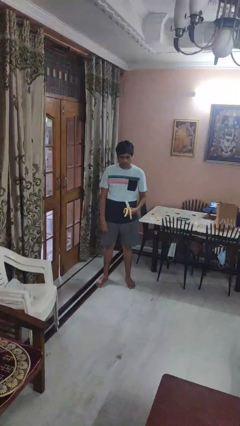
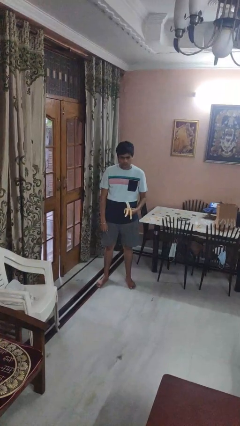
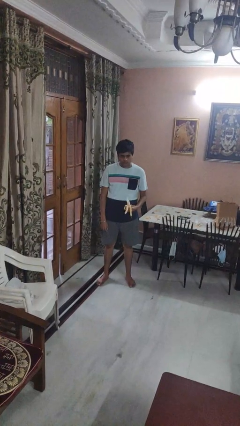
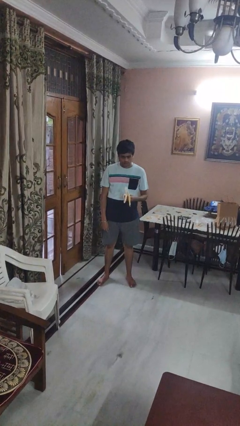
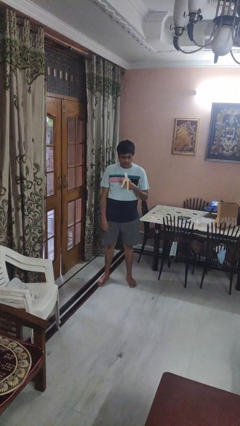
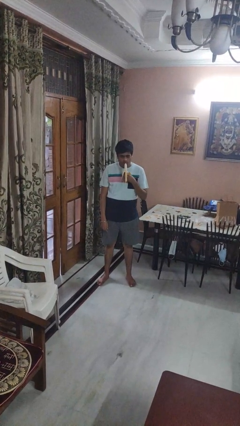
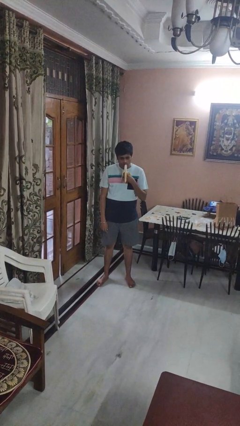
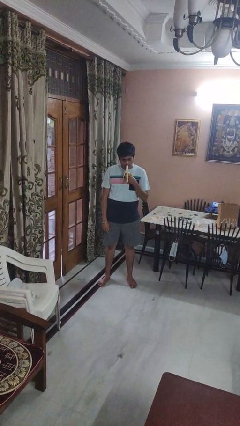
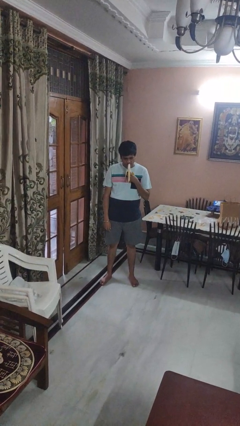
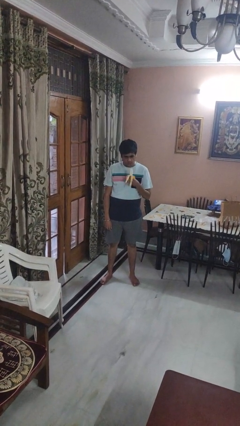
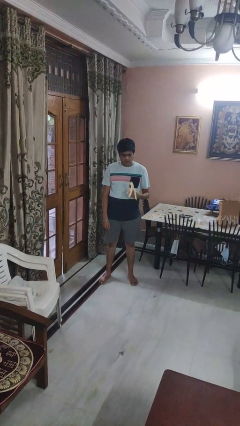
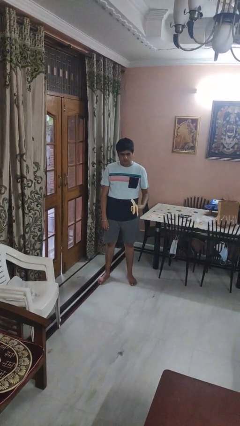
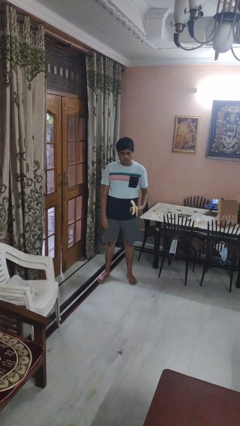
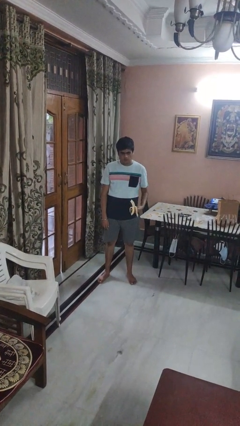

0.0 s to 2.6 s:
person eats banana

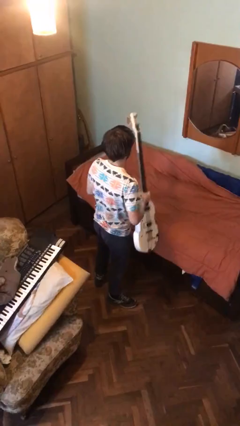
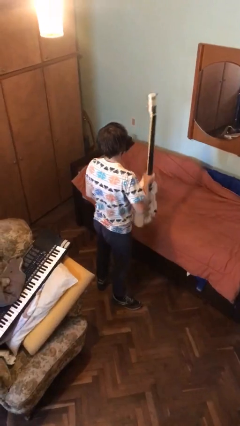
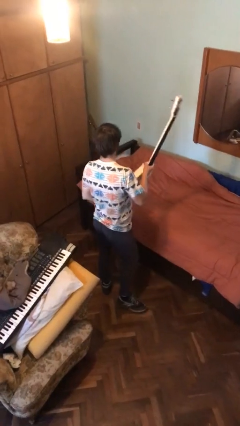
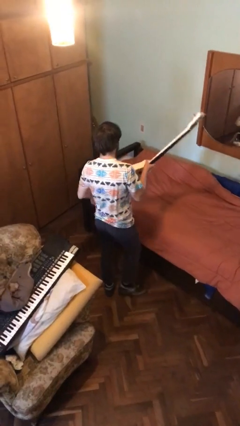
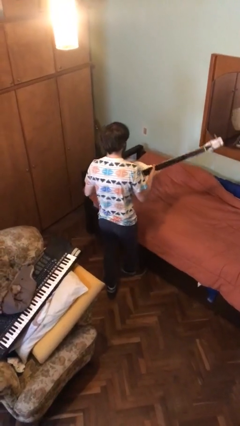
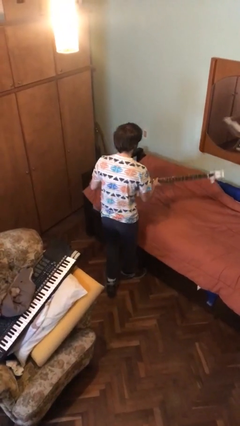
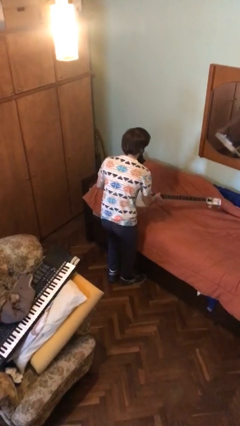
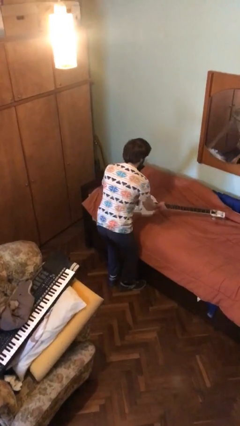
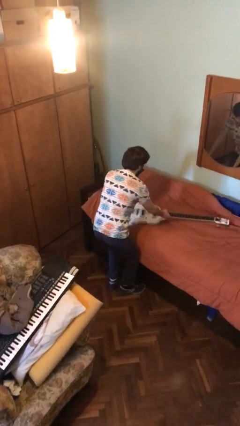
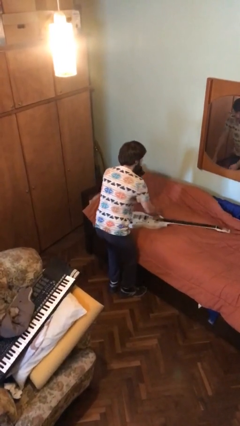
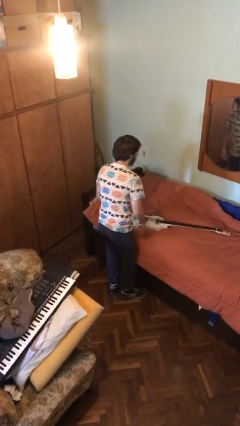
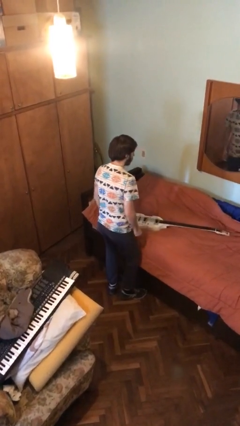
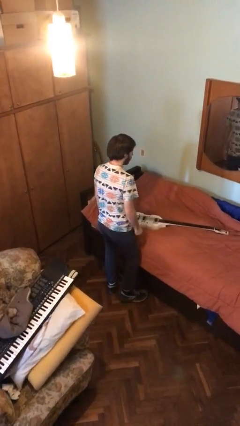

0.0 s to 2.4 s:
person puts down object on bed

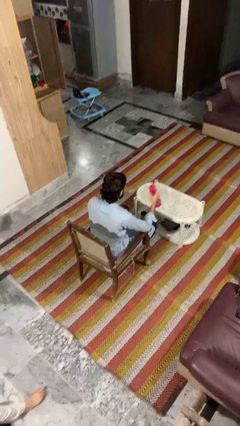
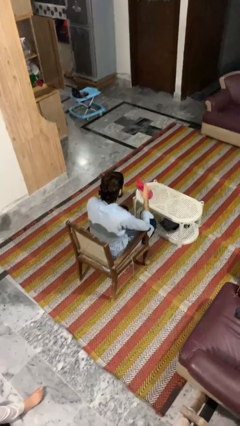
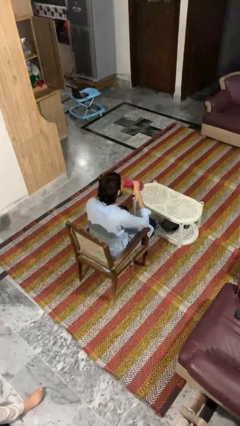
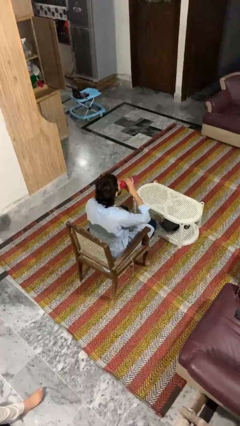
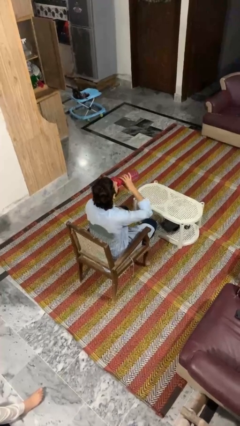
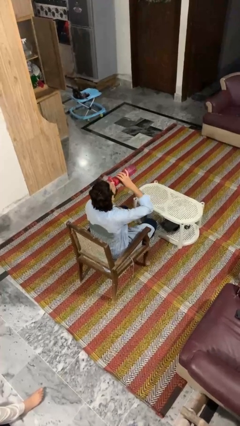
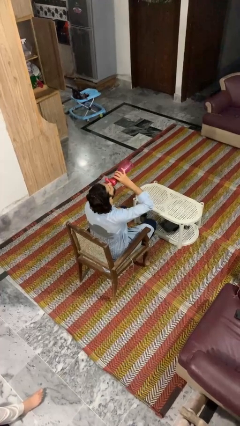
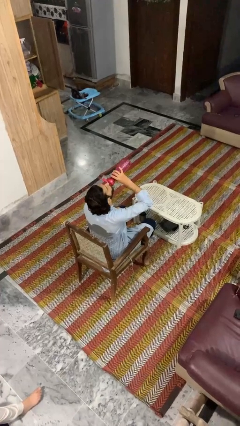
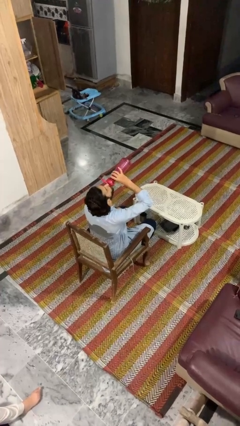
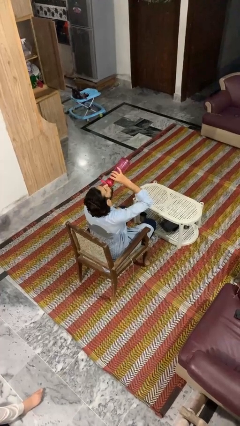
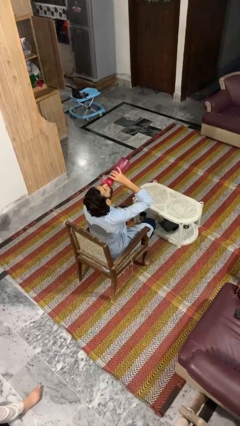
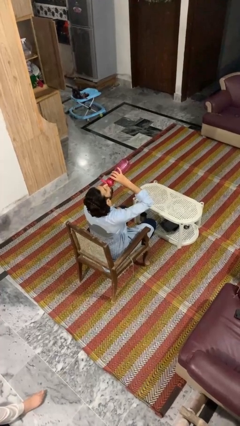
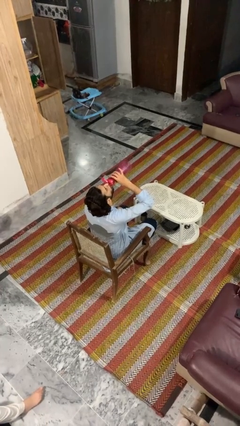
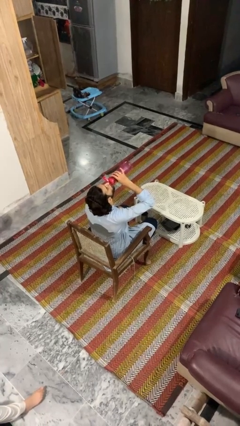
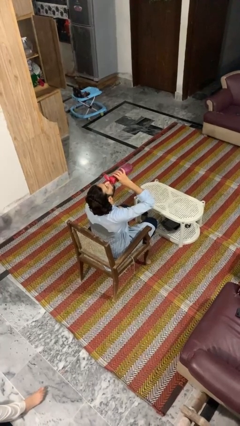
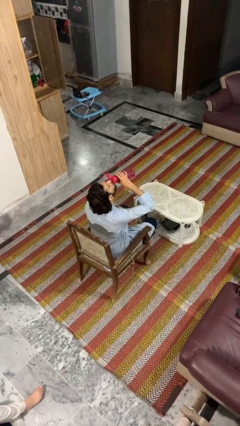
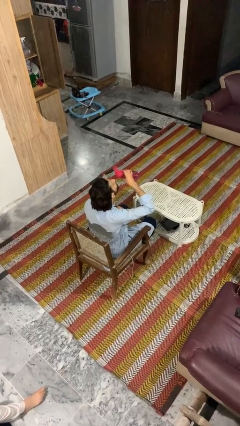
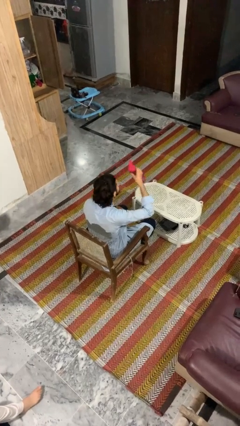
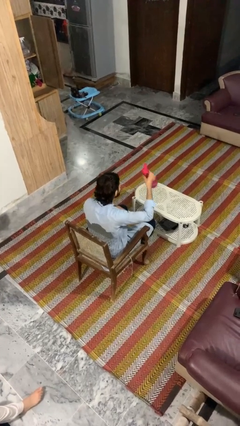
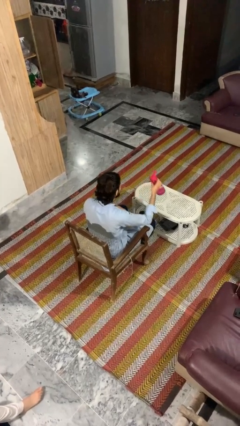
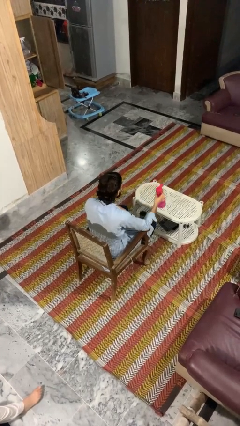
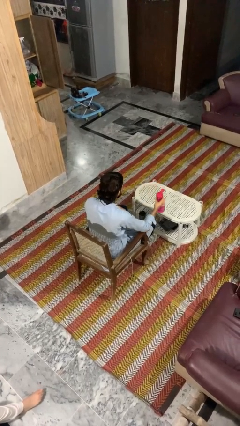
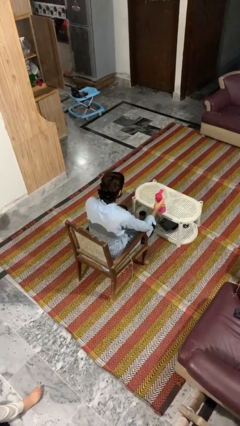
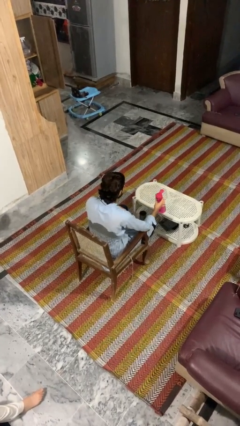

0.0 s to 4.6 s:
person drinks from bottle

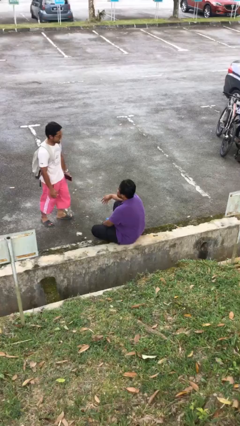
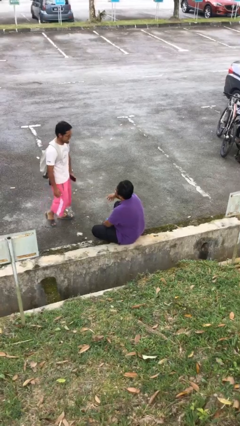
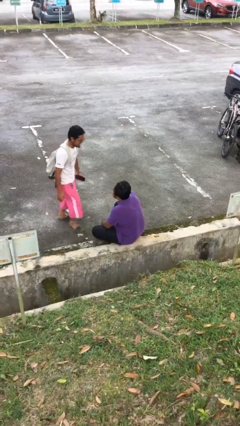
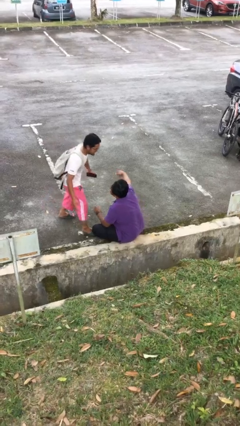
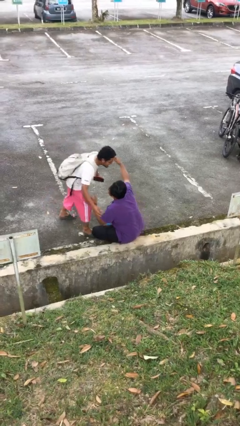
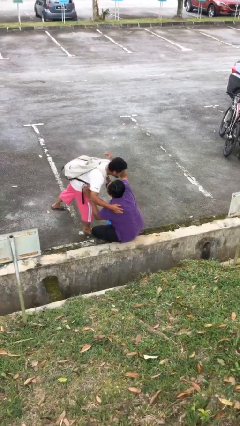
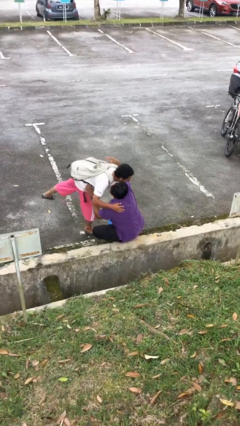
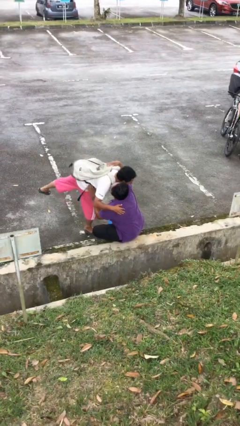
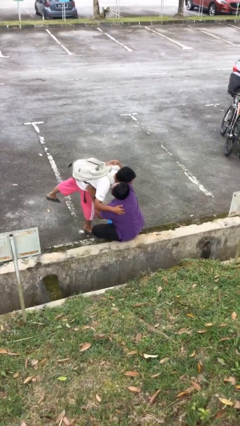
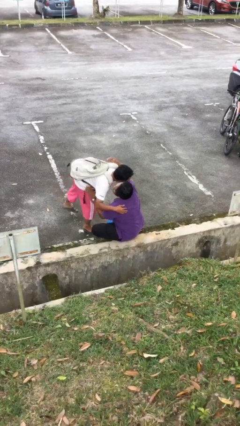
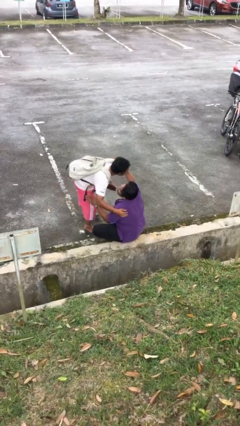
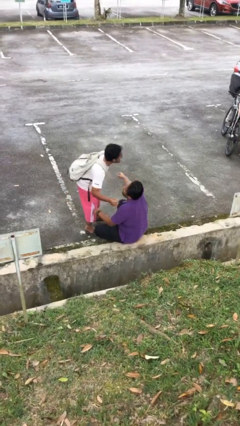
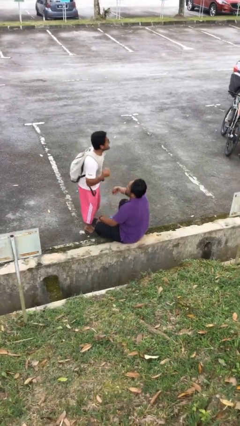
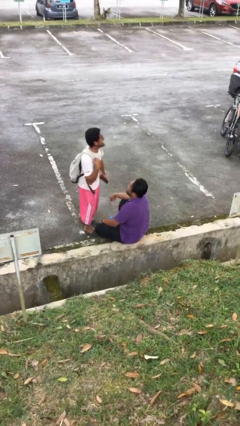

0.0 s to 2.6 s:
person embraces person

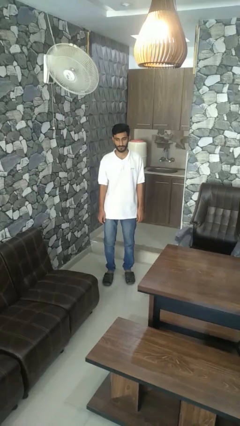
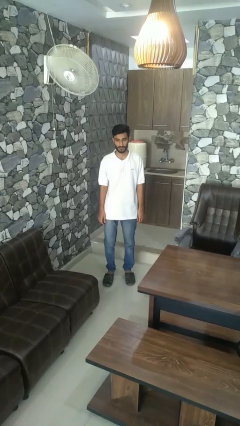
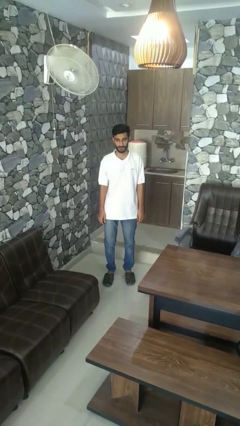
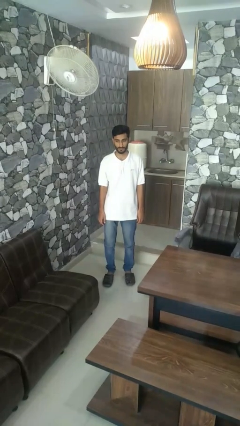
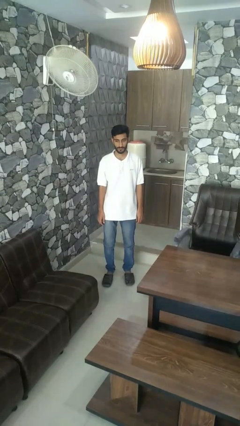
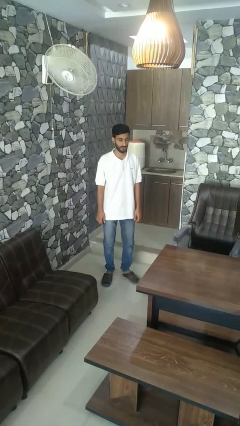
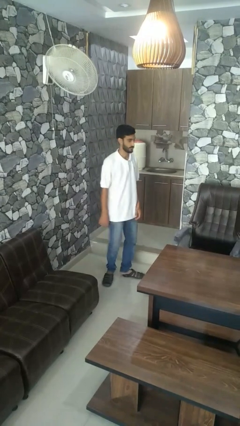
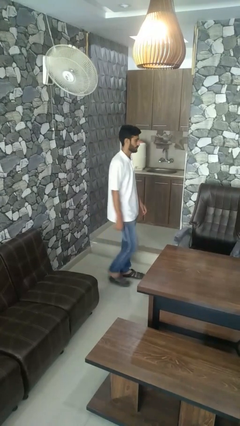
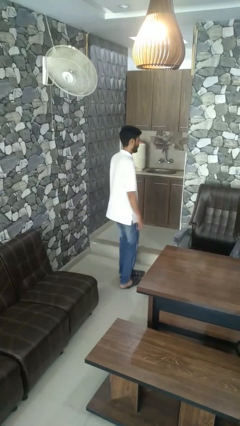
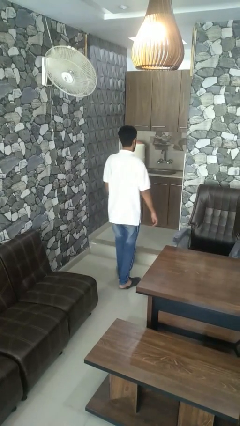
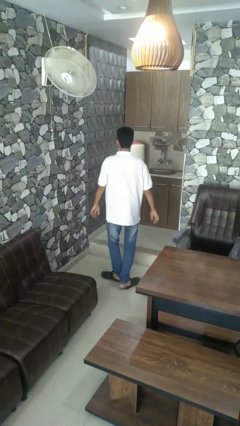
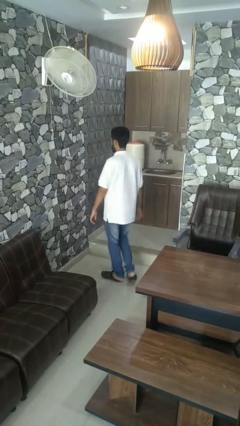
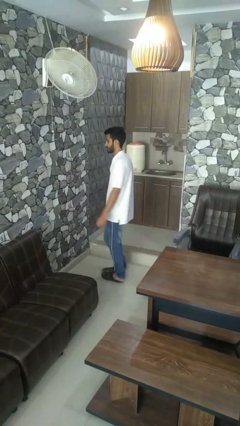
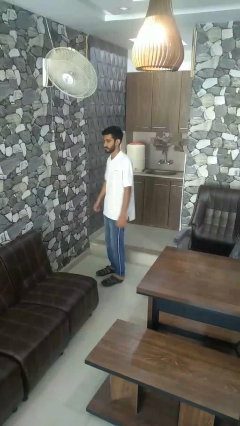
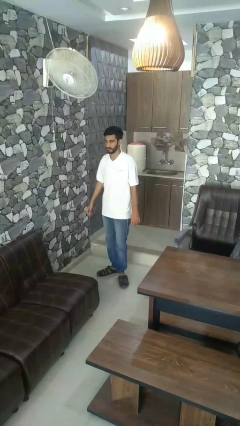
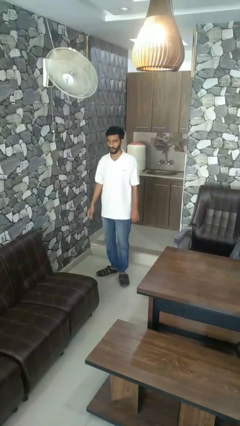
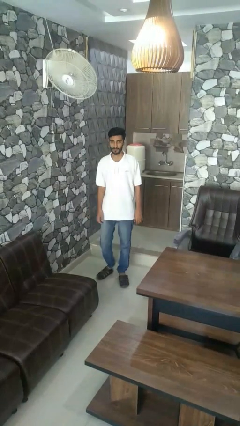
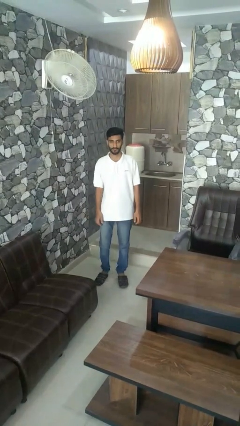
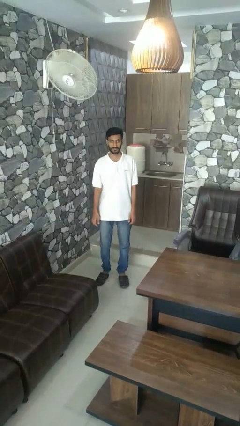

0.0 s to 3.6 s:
person twirls

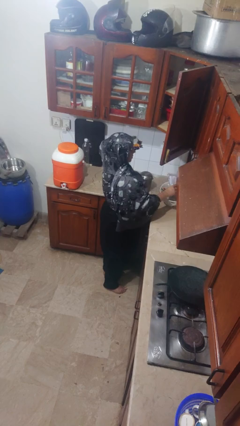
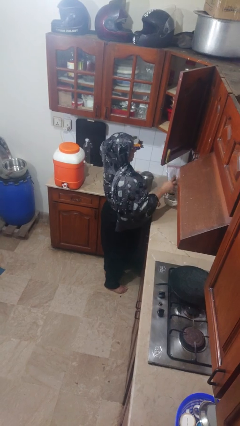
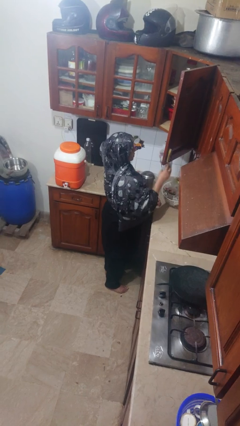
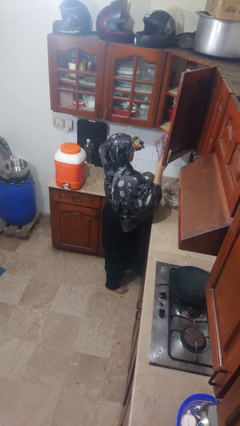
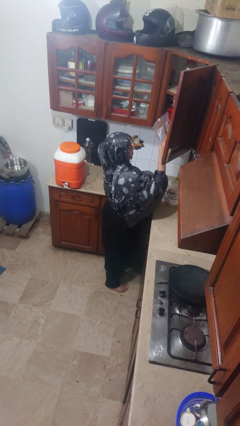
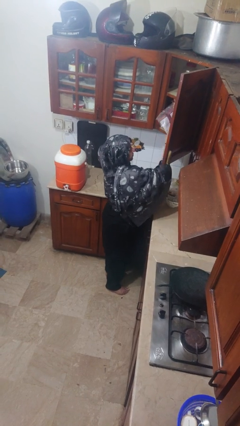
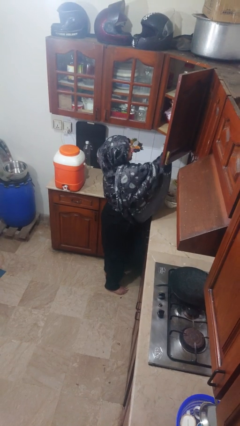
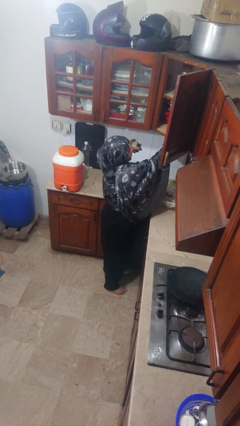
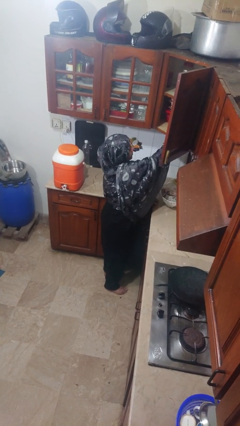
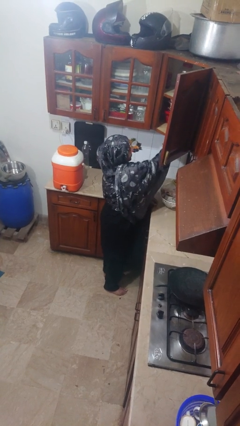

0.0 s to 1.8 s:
person loads groceries into cabinet
